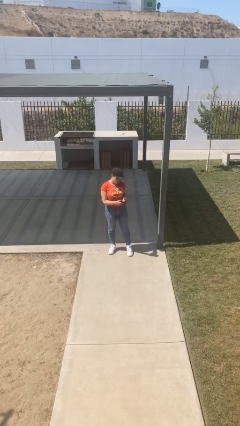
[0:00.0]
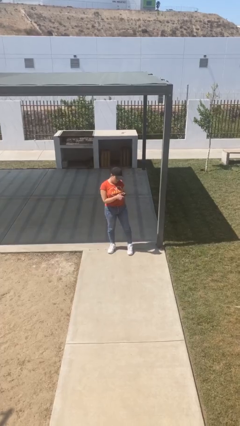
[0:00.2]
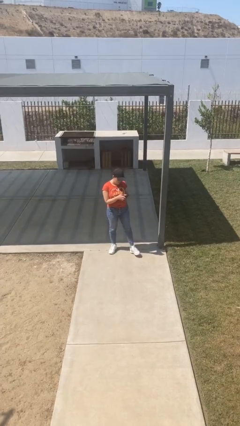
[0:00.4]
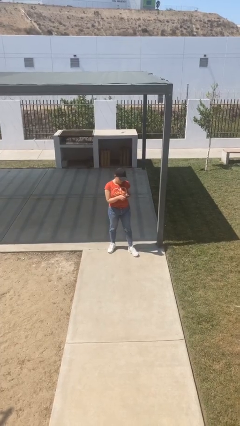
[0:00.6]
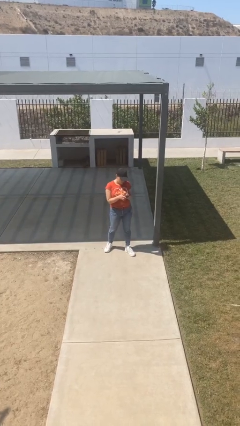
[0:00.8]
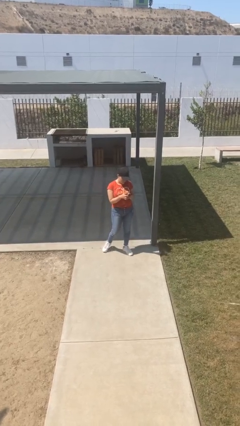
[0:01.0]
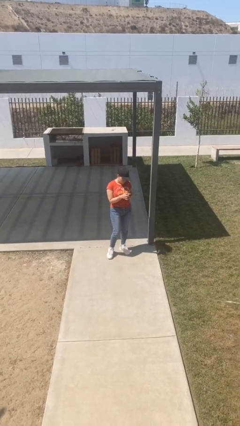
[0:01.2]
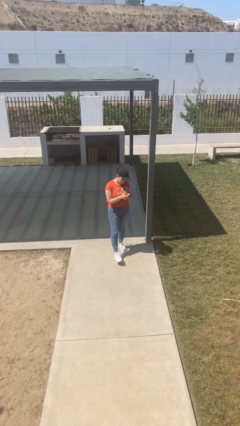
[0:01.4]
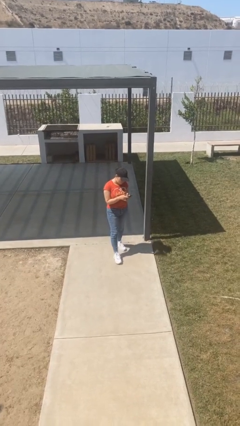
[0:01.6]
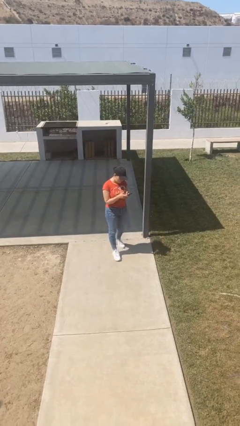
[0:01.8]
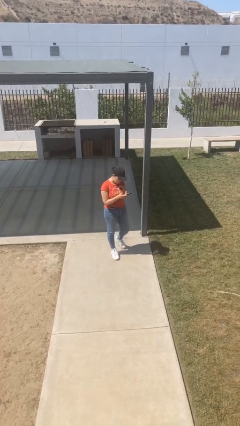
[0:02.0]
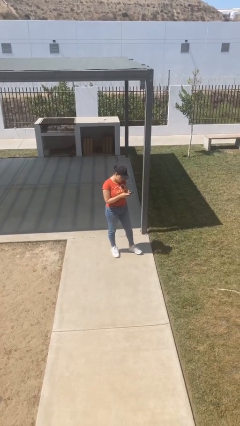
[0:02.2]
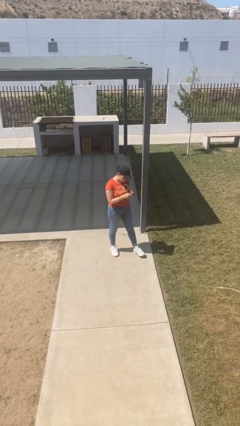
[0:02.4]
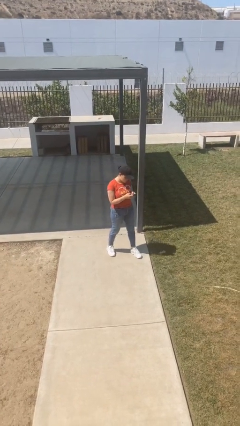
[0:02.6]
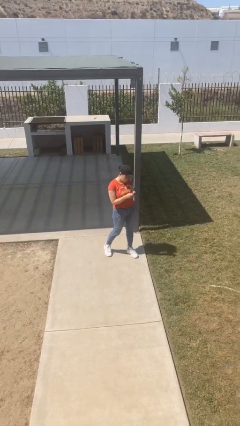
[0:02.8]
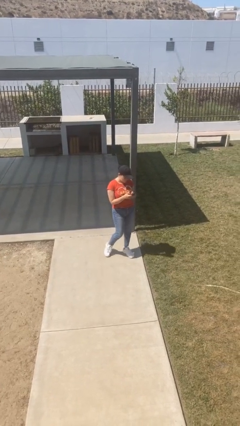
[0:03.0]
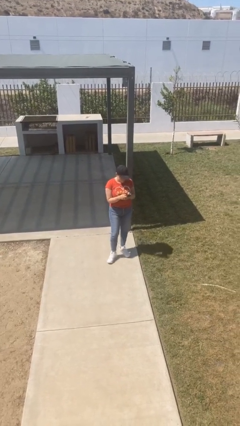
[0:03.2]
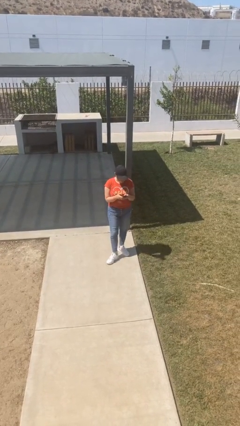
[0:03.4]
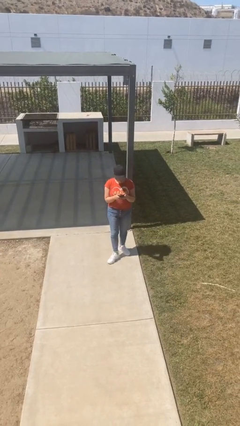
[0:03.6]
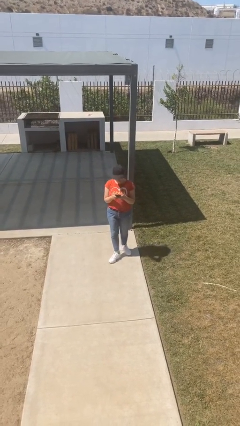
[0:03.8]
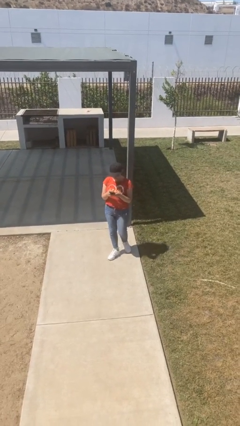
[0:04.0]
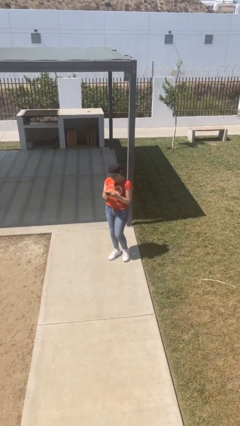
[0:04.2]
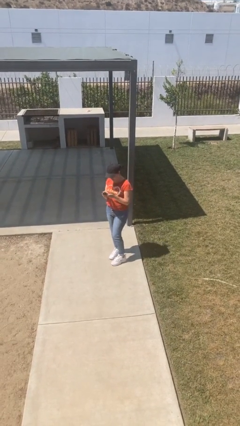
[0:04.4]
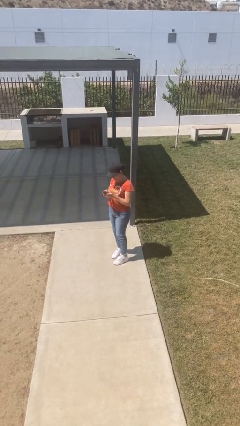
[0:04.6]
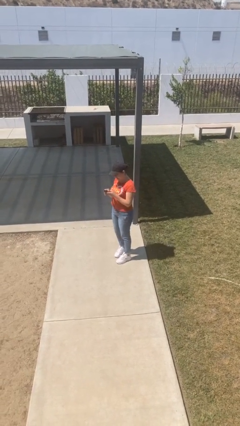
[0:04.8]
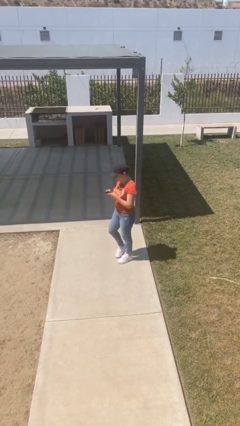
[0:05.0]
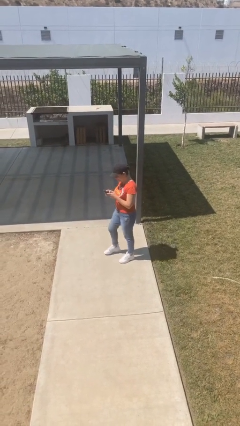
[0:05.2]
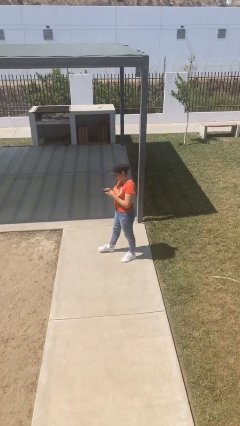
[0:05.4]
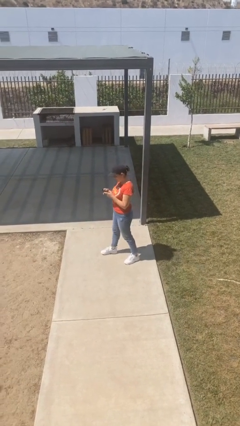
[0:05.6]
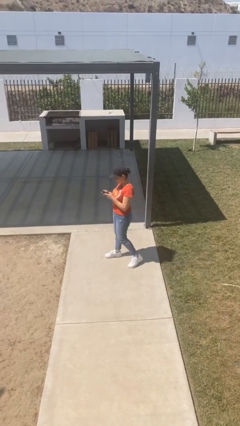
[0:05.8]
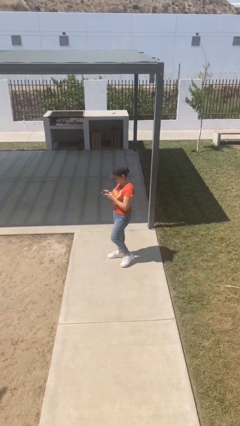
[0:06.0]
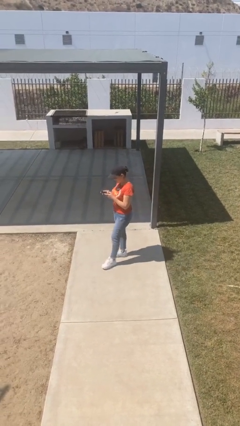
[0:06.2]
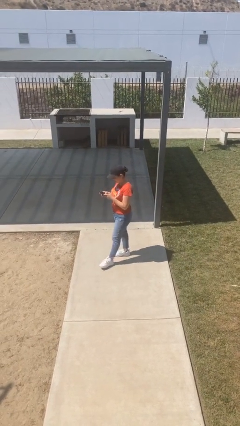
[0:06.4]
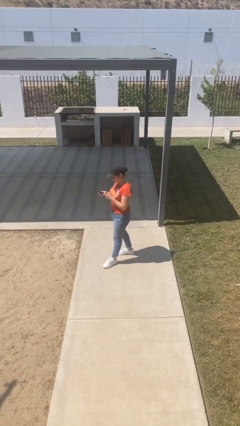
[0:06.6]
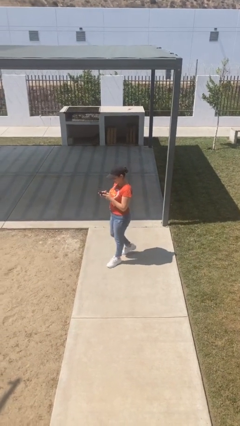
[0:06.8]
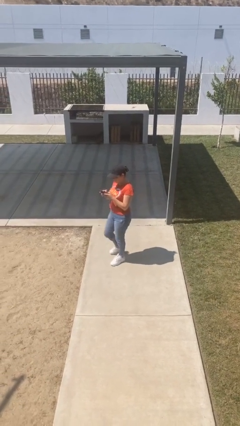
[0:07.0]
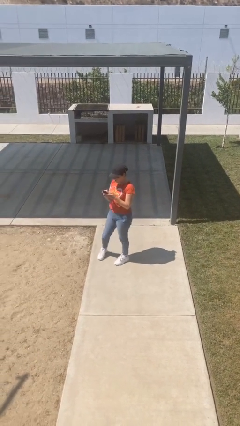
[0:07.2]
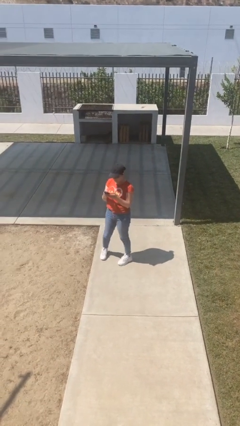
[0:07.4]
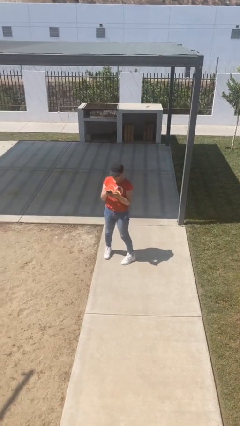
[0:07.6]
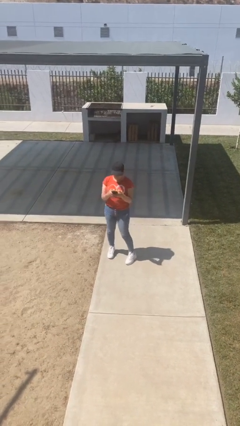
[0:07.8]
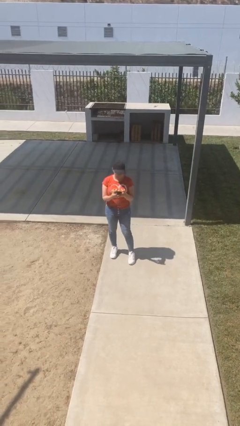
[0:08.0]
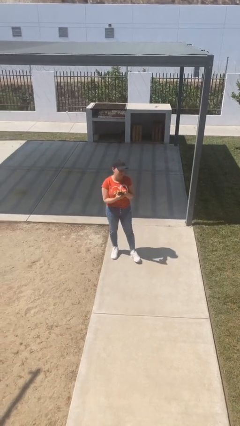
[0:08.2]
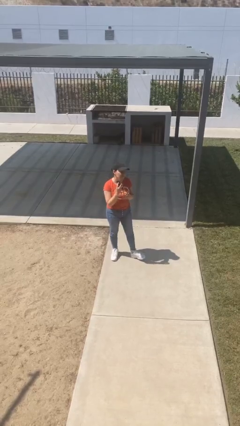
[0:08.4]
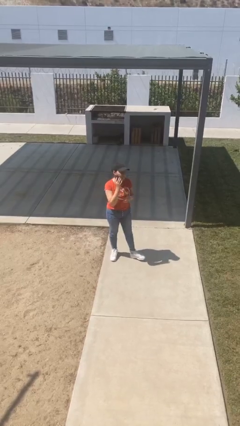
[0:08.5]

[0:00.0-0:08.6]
person texts on phone

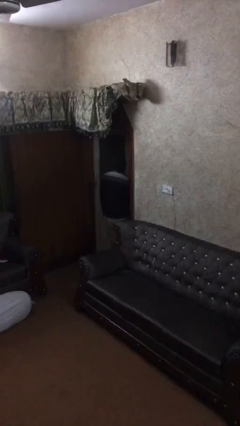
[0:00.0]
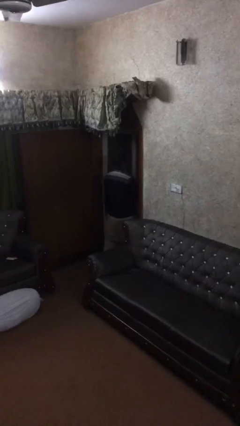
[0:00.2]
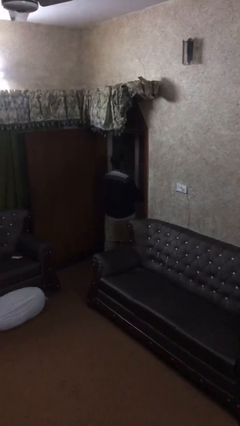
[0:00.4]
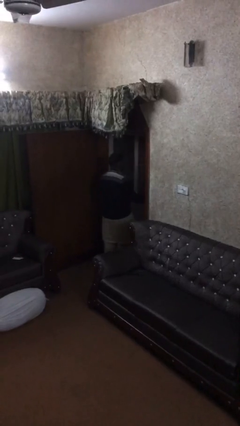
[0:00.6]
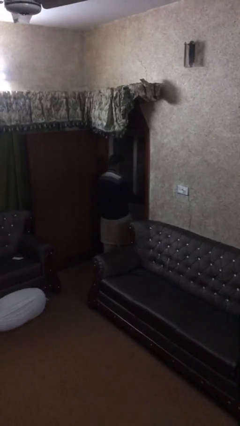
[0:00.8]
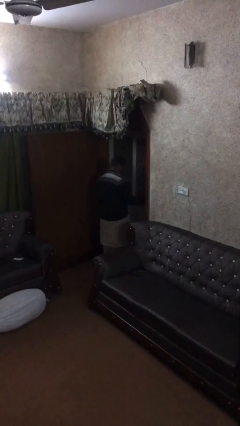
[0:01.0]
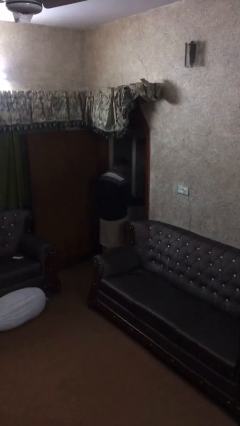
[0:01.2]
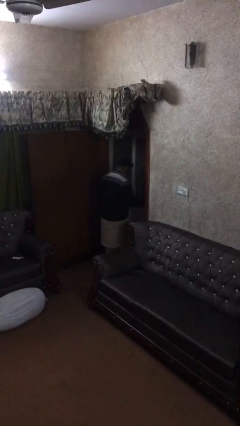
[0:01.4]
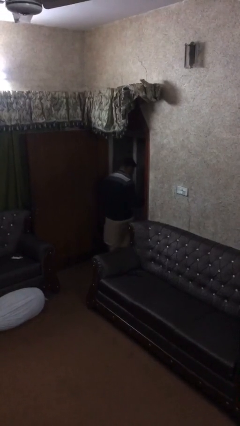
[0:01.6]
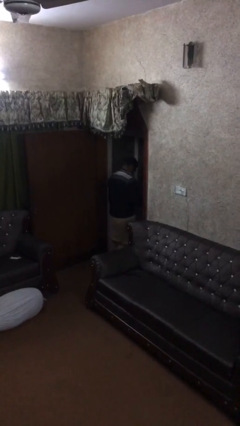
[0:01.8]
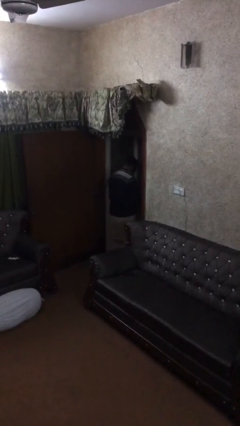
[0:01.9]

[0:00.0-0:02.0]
person closes facility door

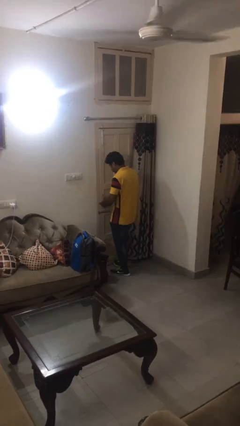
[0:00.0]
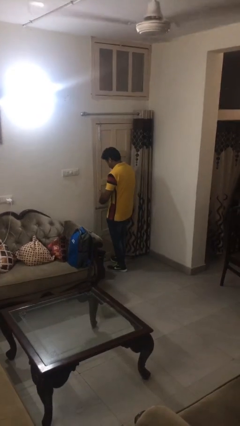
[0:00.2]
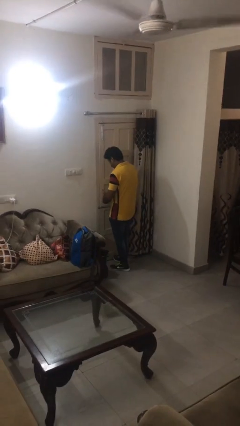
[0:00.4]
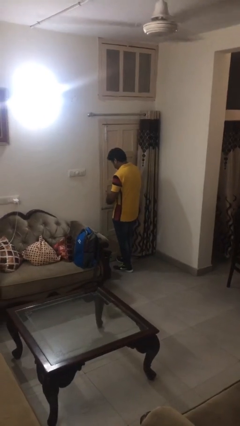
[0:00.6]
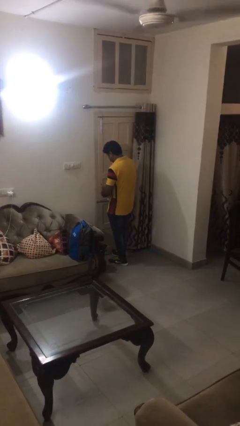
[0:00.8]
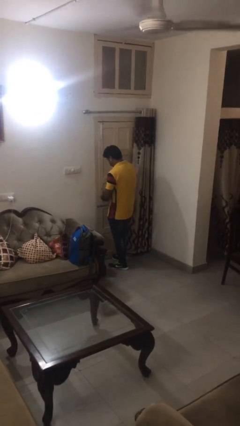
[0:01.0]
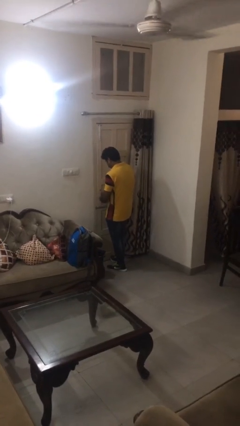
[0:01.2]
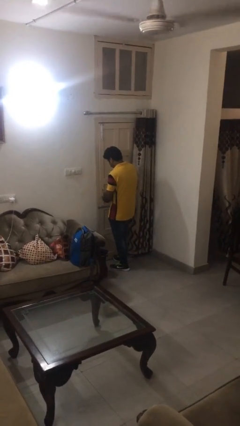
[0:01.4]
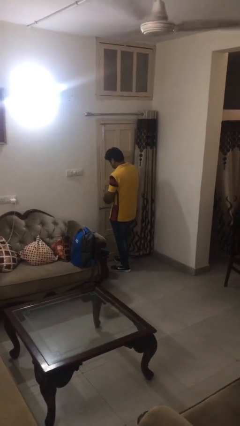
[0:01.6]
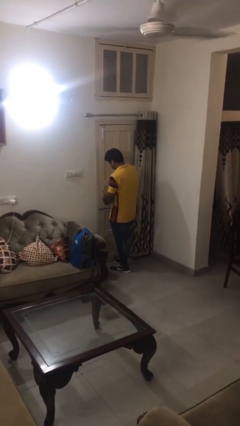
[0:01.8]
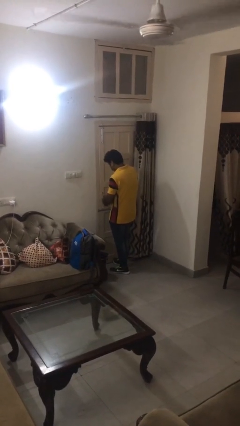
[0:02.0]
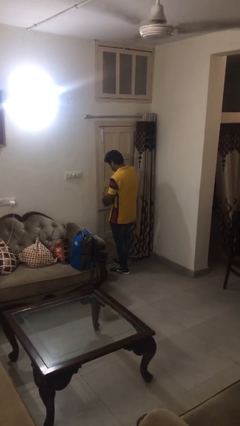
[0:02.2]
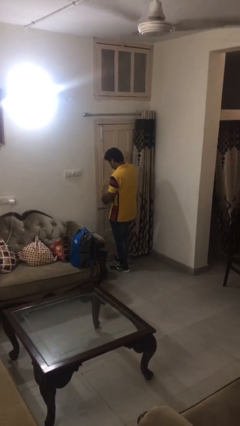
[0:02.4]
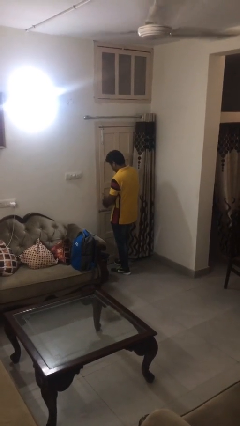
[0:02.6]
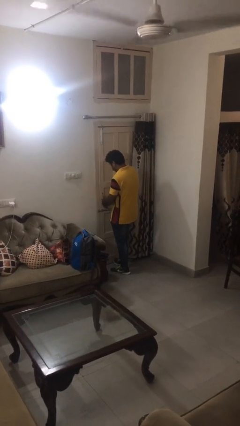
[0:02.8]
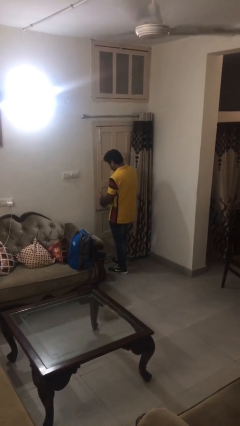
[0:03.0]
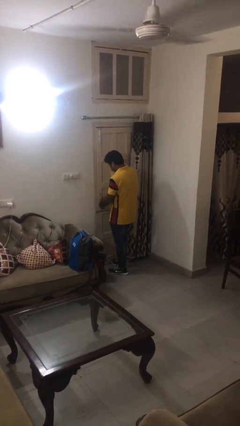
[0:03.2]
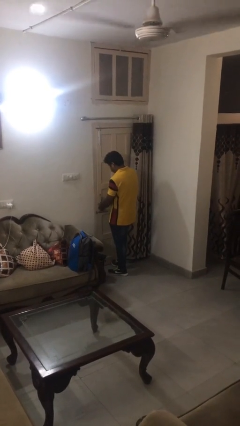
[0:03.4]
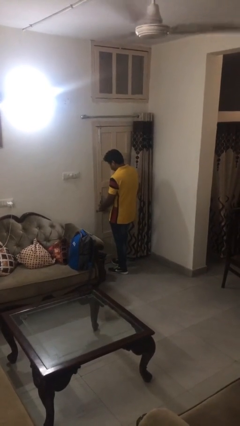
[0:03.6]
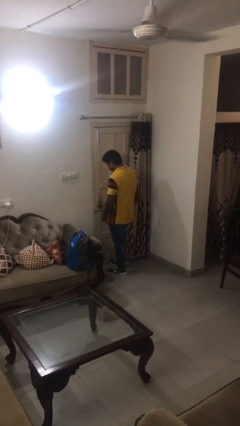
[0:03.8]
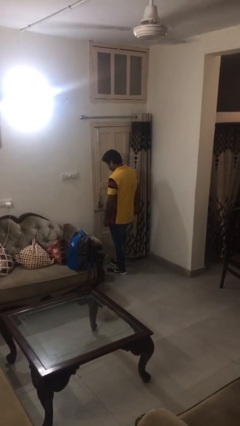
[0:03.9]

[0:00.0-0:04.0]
person locks door with keys

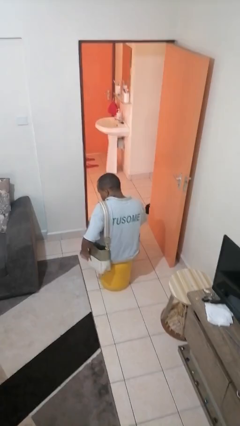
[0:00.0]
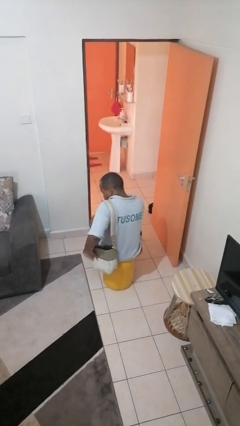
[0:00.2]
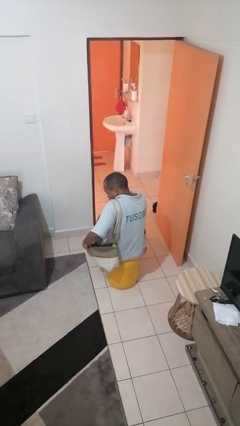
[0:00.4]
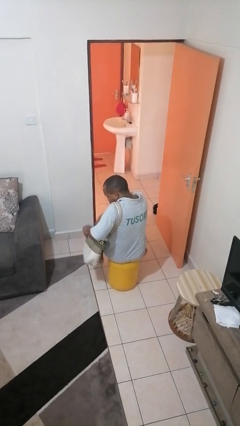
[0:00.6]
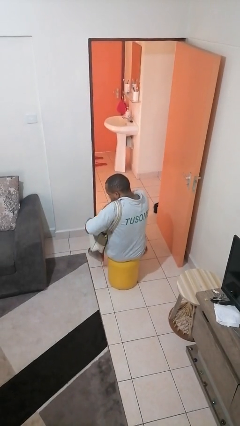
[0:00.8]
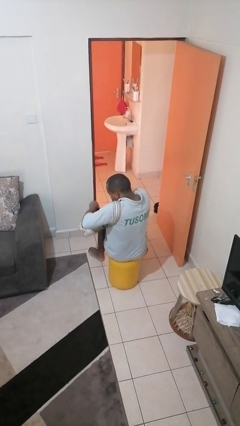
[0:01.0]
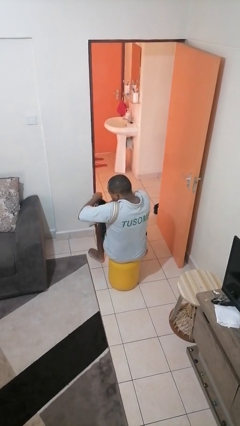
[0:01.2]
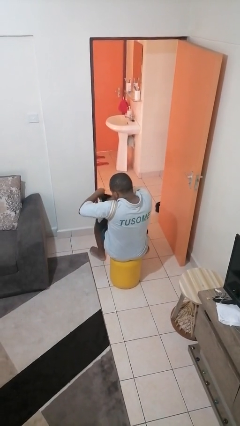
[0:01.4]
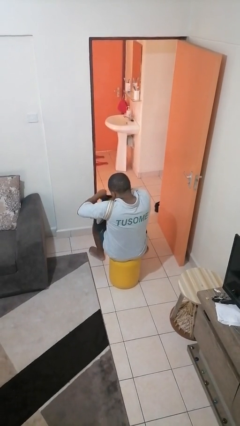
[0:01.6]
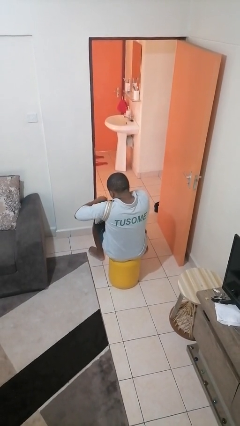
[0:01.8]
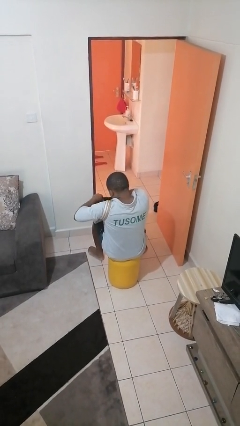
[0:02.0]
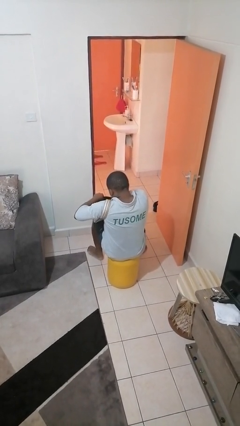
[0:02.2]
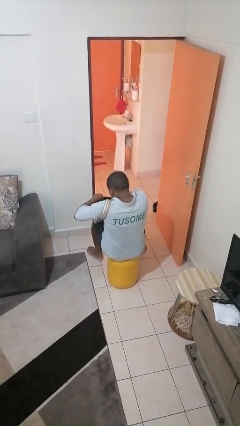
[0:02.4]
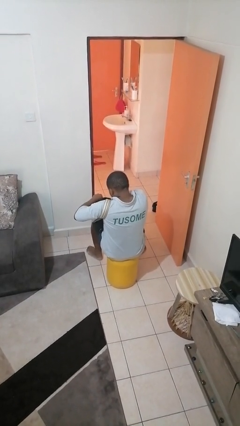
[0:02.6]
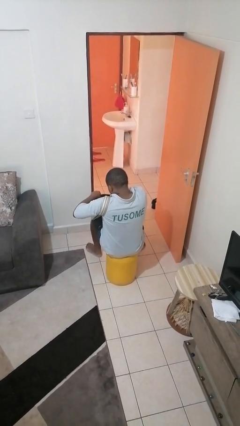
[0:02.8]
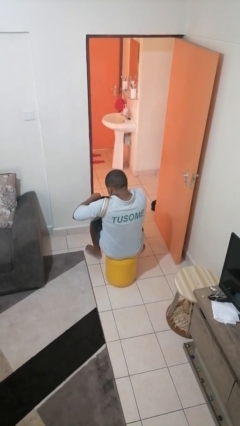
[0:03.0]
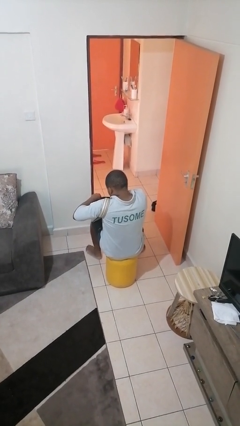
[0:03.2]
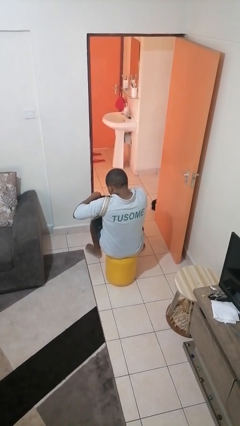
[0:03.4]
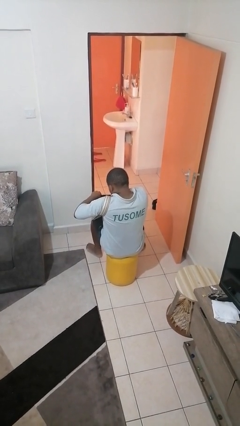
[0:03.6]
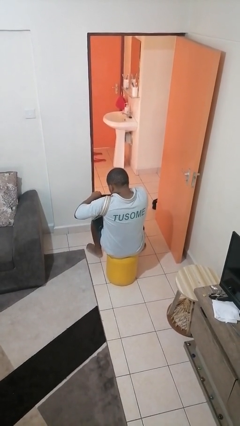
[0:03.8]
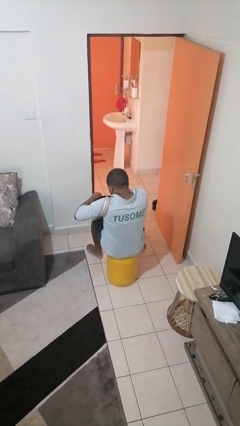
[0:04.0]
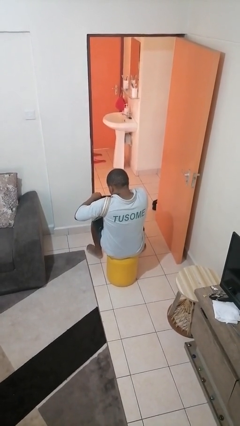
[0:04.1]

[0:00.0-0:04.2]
person searches in purse
